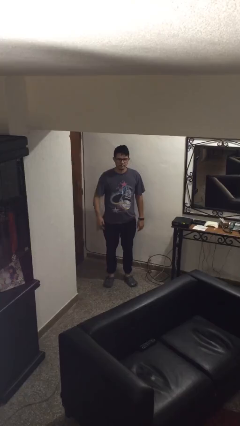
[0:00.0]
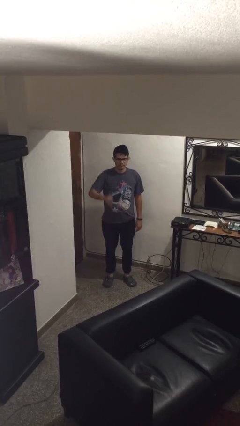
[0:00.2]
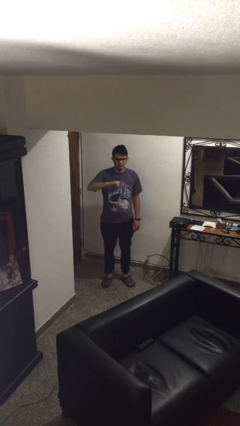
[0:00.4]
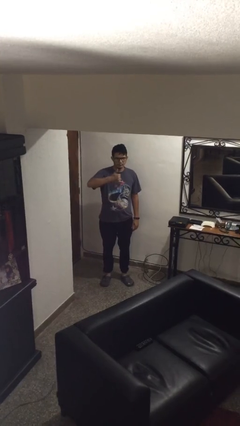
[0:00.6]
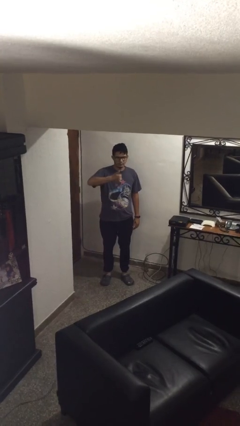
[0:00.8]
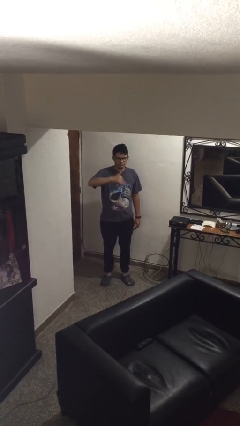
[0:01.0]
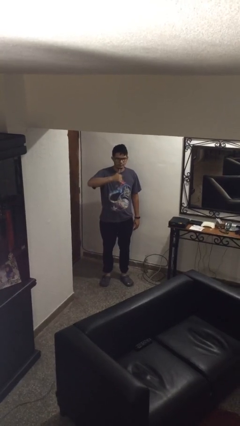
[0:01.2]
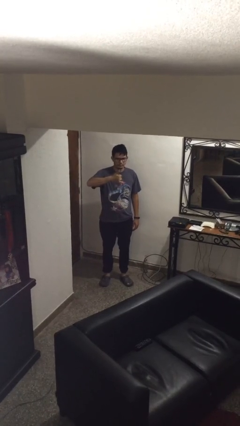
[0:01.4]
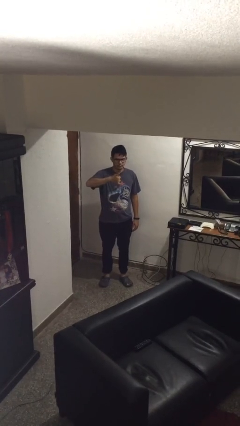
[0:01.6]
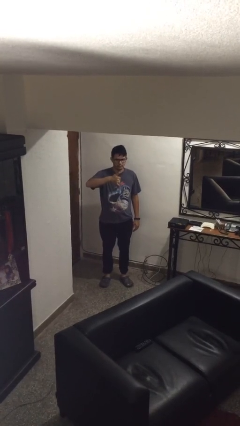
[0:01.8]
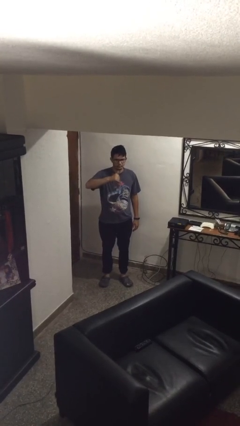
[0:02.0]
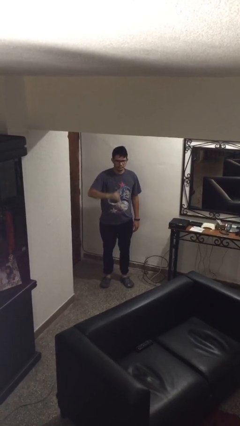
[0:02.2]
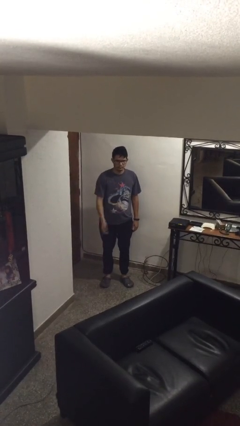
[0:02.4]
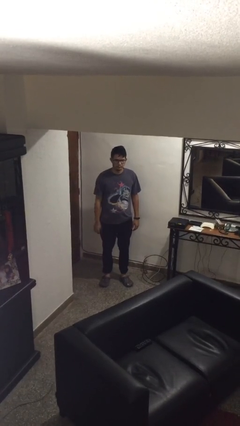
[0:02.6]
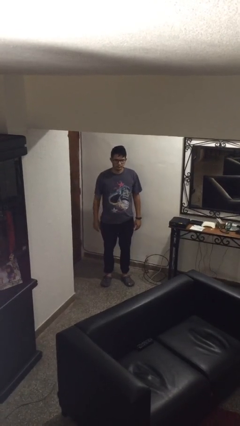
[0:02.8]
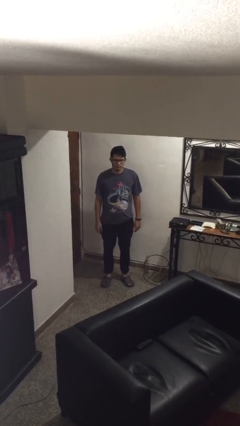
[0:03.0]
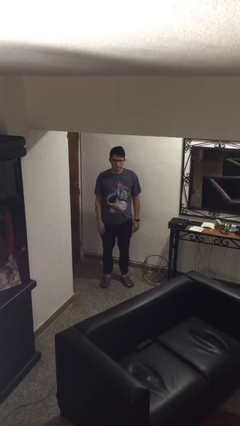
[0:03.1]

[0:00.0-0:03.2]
person gestures hang loose

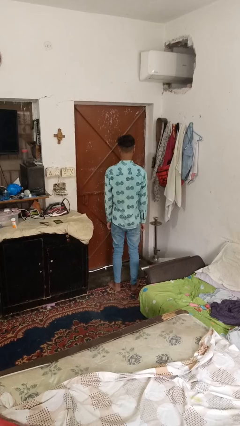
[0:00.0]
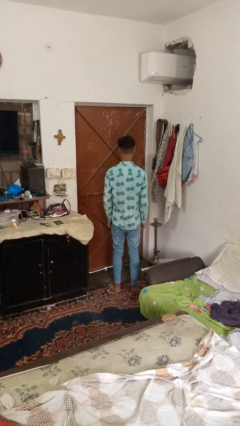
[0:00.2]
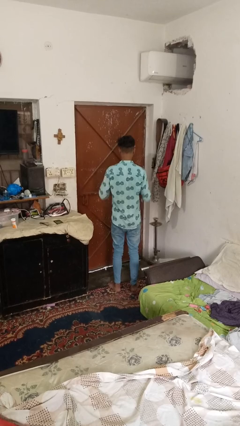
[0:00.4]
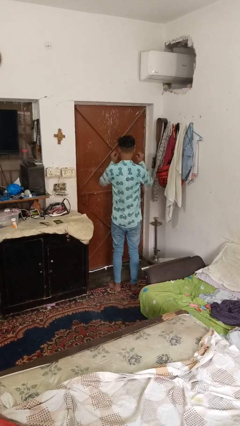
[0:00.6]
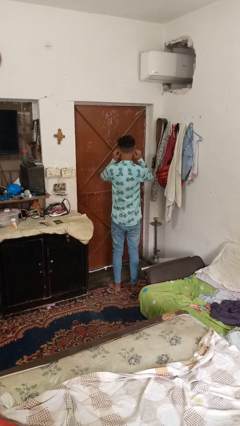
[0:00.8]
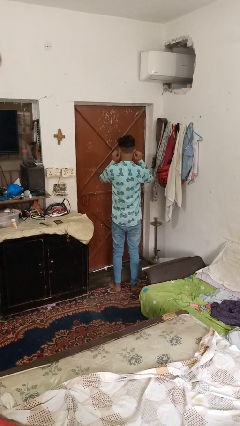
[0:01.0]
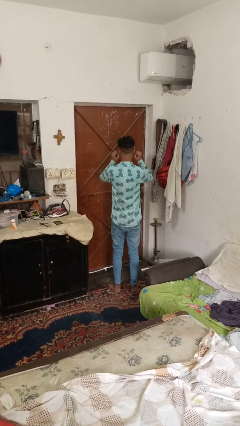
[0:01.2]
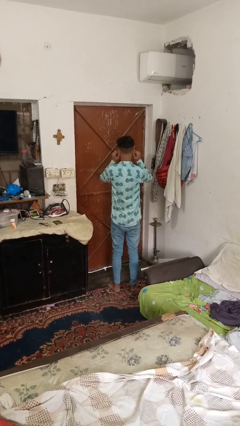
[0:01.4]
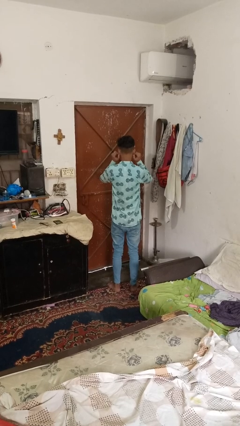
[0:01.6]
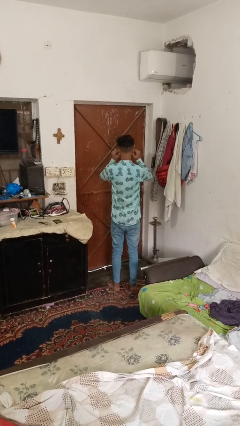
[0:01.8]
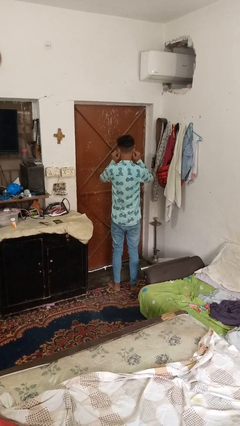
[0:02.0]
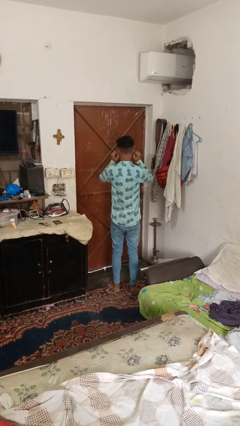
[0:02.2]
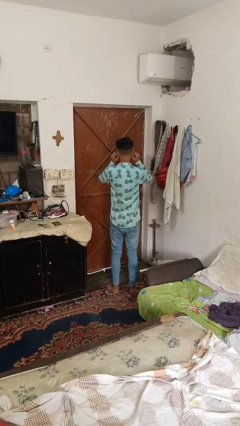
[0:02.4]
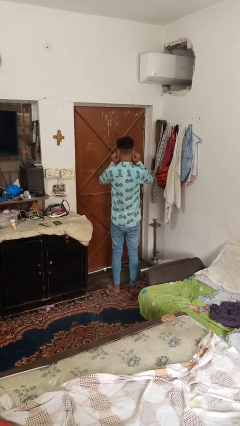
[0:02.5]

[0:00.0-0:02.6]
person touches earlobe

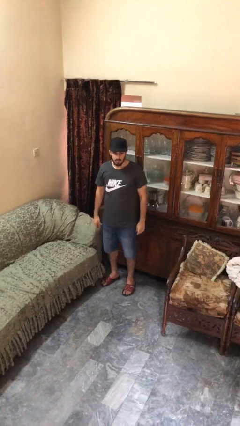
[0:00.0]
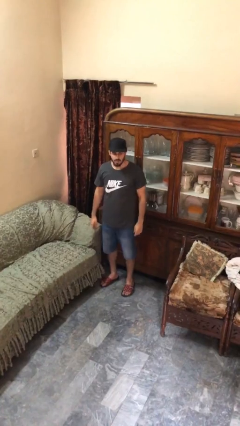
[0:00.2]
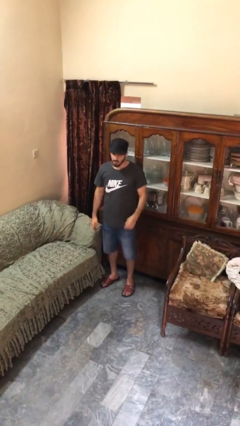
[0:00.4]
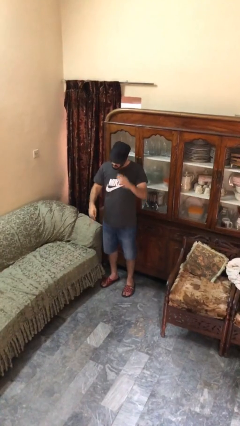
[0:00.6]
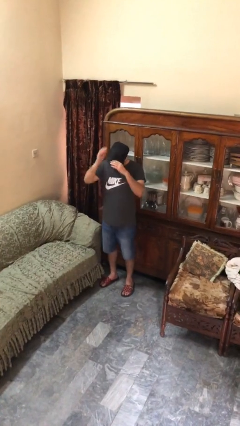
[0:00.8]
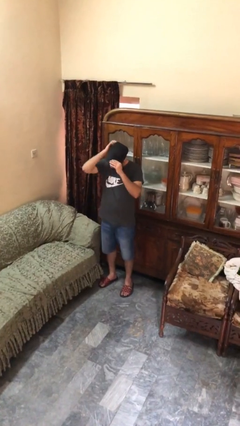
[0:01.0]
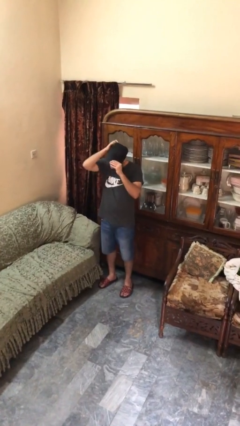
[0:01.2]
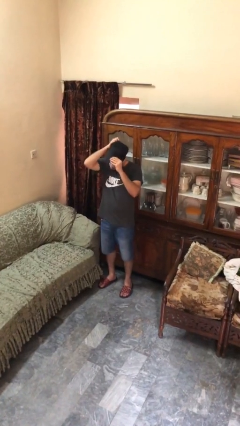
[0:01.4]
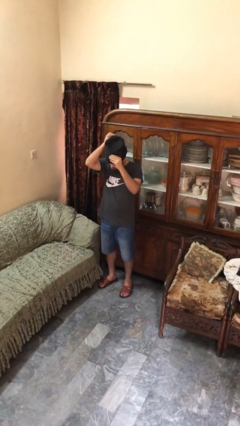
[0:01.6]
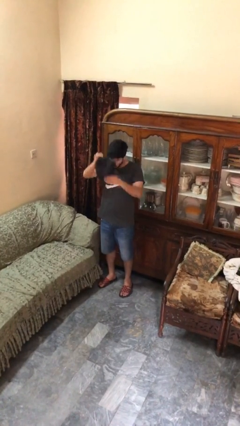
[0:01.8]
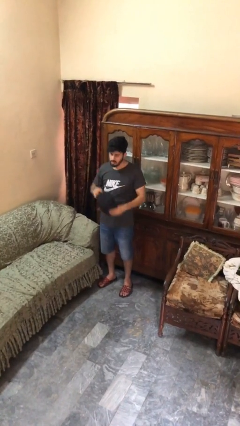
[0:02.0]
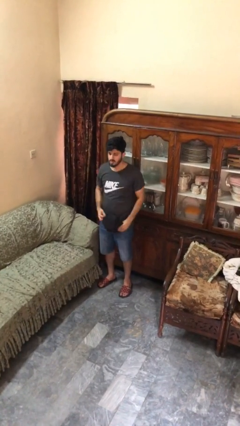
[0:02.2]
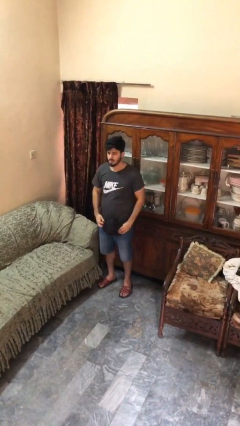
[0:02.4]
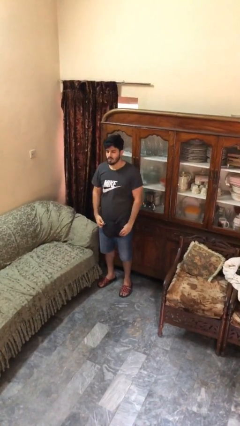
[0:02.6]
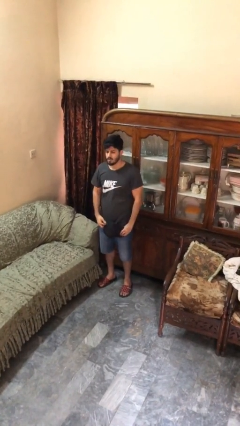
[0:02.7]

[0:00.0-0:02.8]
person takes off hat

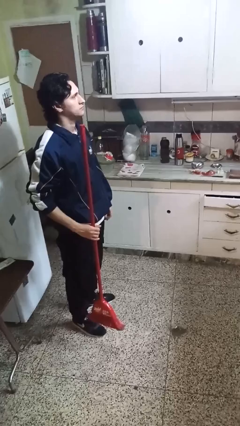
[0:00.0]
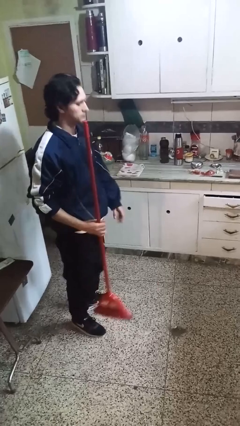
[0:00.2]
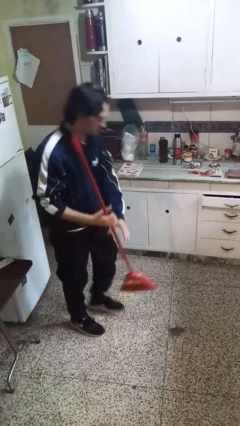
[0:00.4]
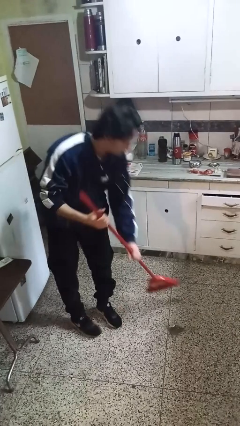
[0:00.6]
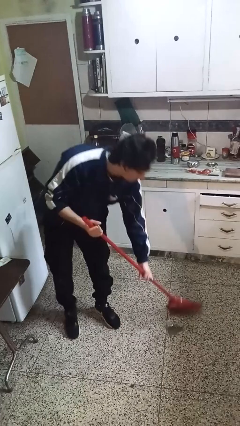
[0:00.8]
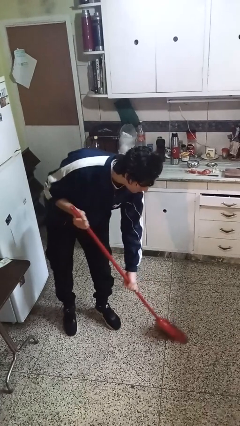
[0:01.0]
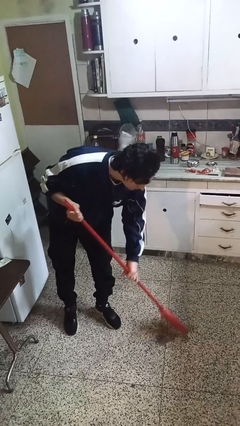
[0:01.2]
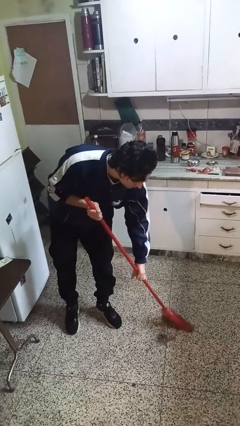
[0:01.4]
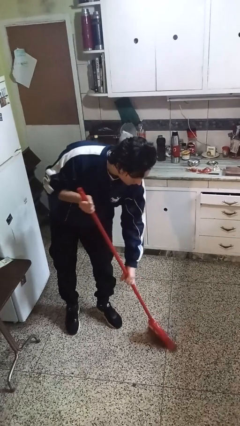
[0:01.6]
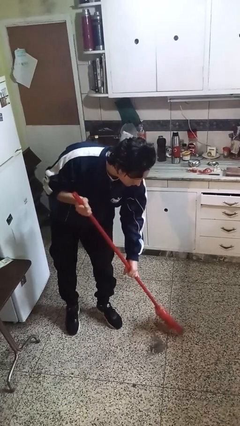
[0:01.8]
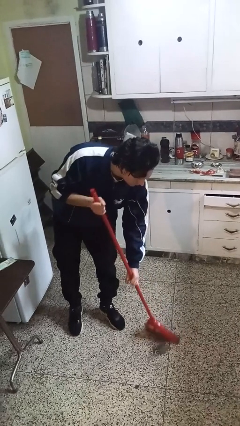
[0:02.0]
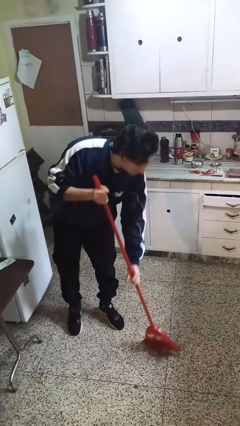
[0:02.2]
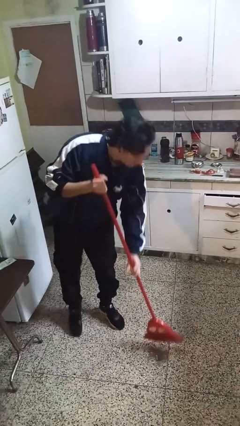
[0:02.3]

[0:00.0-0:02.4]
person sweeps floor

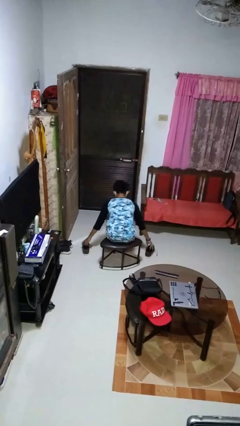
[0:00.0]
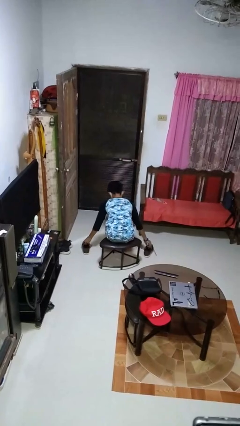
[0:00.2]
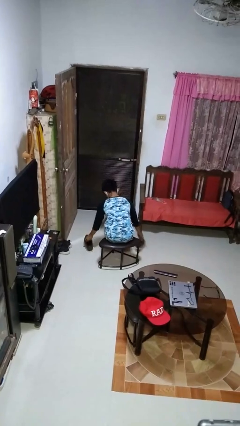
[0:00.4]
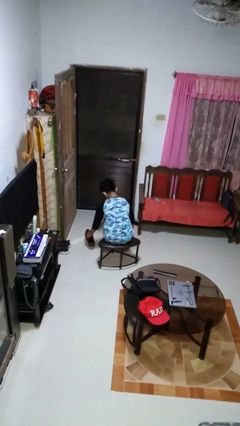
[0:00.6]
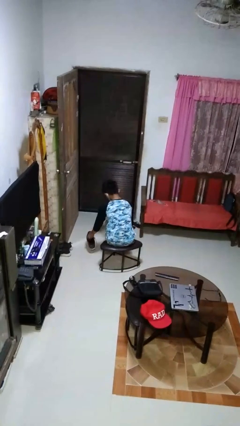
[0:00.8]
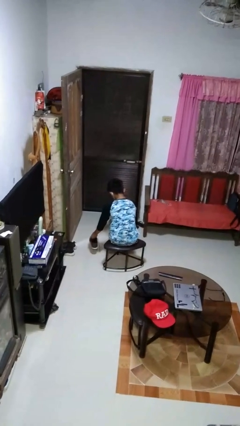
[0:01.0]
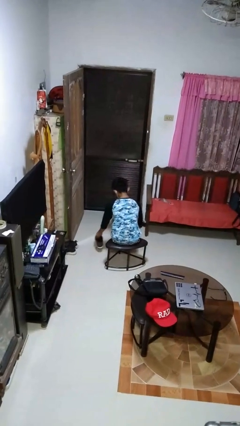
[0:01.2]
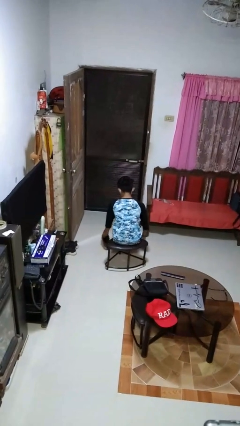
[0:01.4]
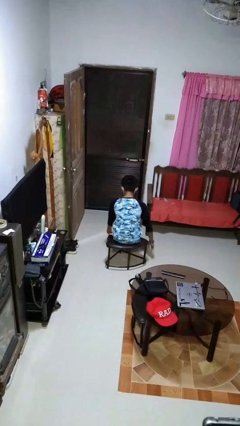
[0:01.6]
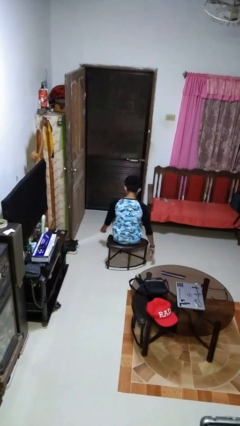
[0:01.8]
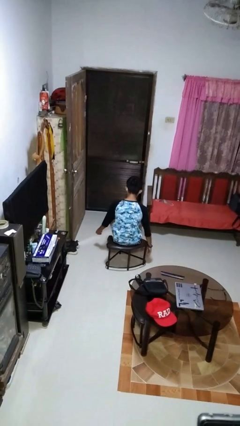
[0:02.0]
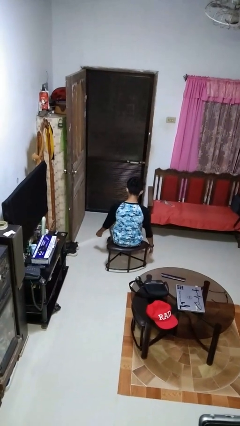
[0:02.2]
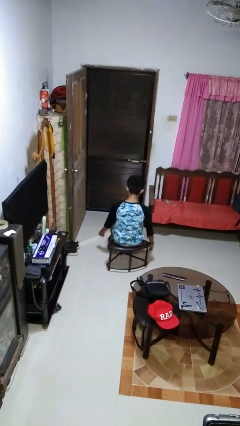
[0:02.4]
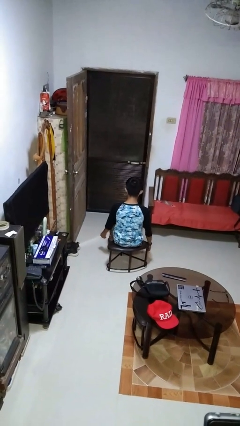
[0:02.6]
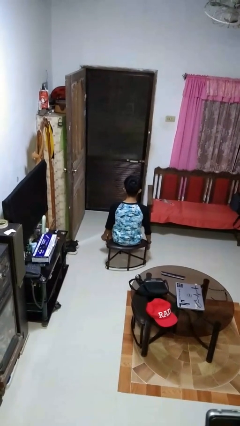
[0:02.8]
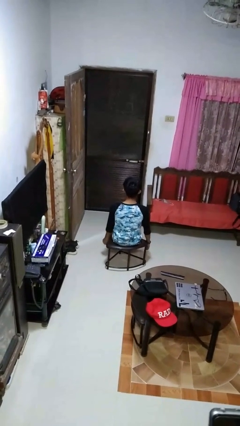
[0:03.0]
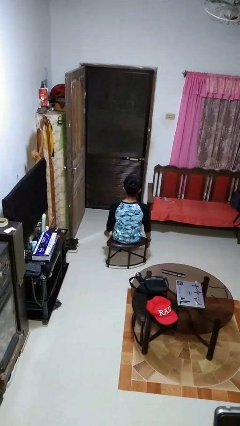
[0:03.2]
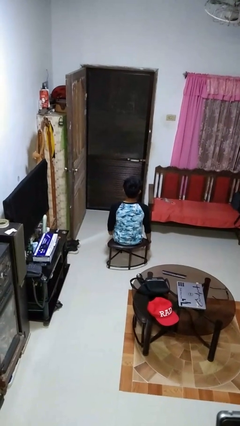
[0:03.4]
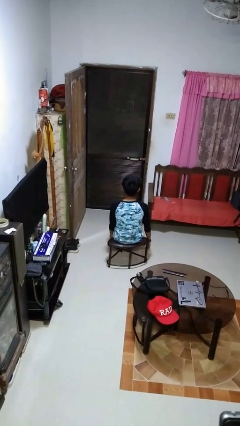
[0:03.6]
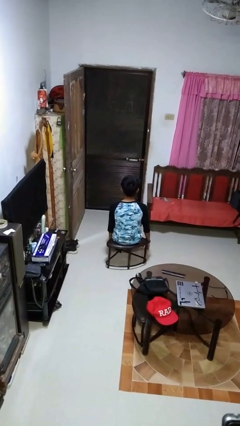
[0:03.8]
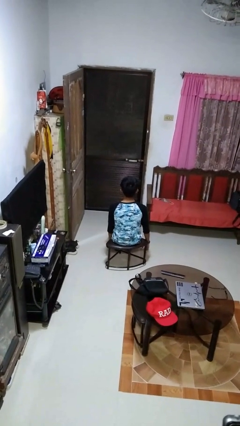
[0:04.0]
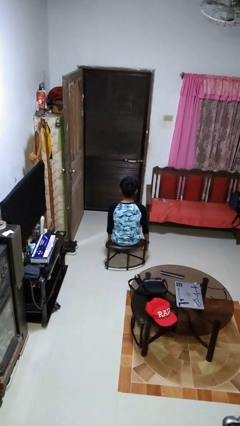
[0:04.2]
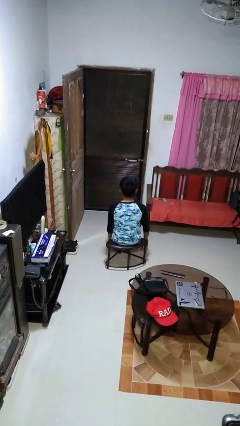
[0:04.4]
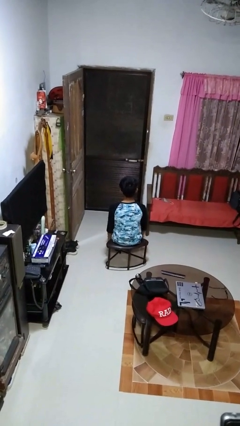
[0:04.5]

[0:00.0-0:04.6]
person puts on shoes

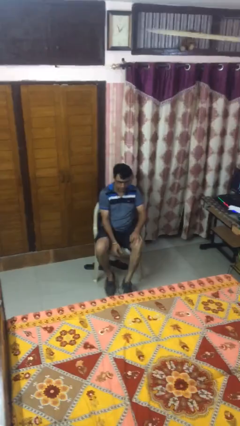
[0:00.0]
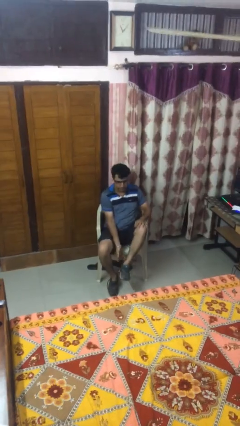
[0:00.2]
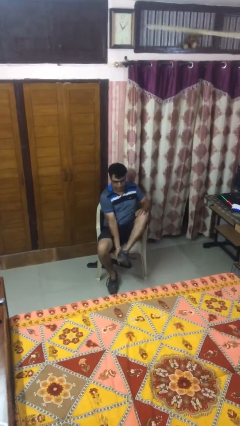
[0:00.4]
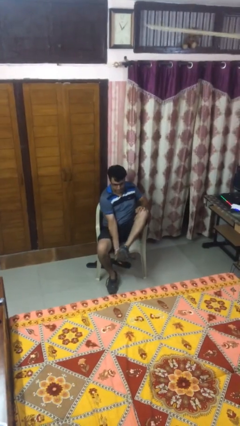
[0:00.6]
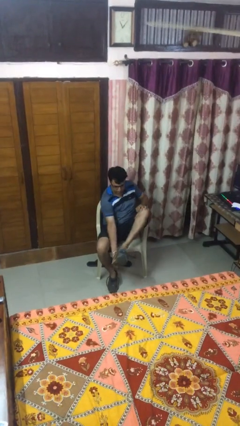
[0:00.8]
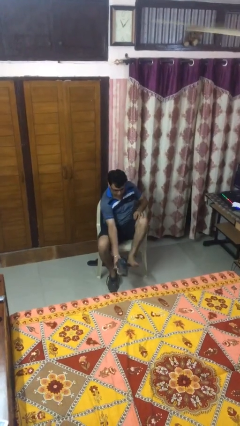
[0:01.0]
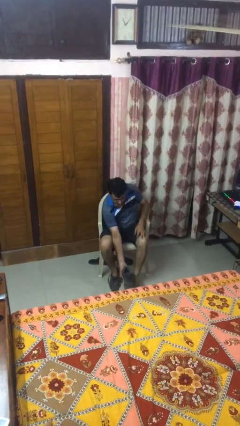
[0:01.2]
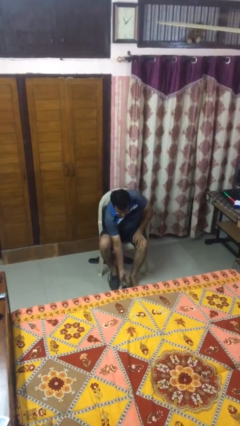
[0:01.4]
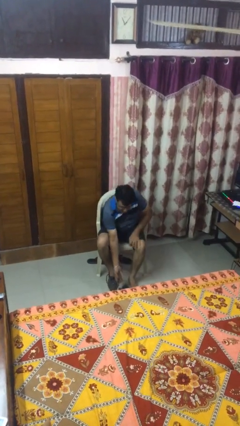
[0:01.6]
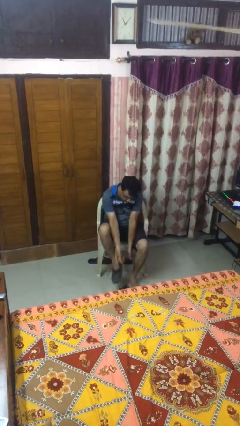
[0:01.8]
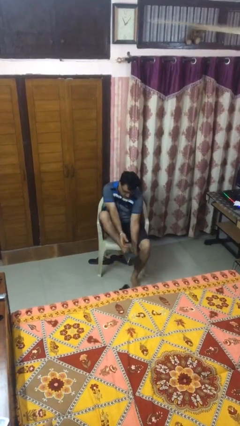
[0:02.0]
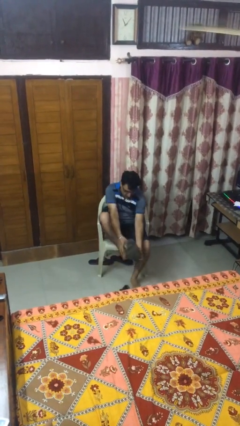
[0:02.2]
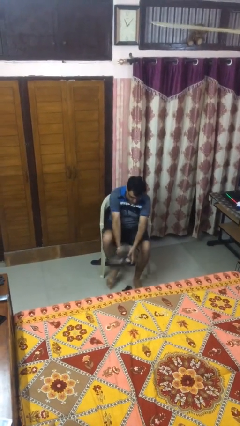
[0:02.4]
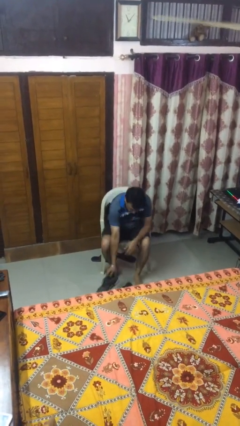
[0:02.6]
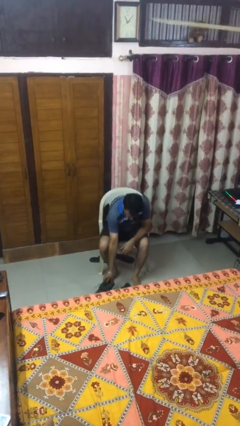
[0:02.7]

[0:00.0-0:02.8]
person takes off shoes
